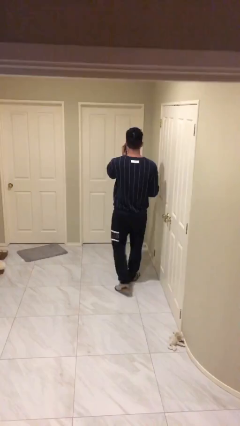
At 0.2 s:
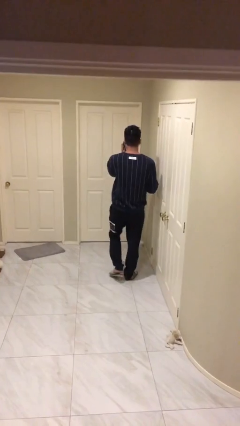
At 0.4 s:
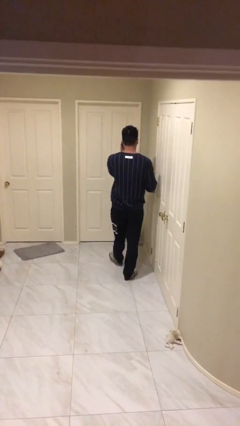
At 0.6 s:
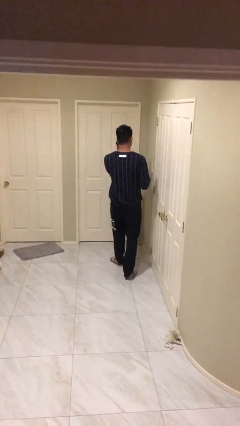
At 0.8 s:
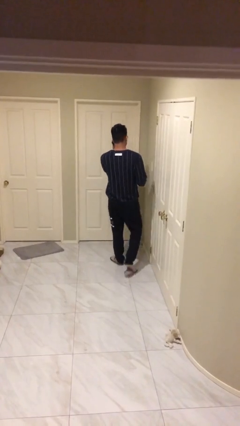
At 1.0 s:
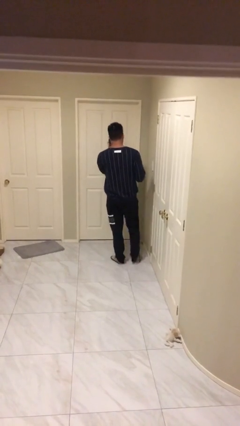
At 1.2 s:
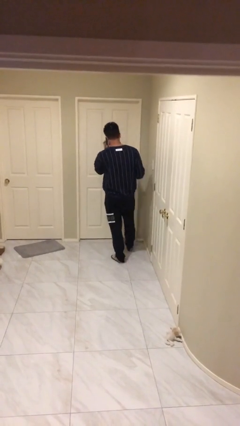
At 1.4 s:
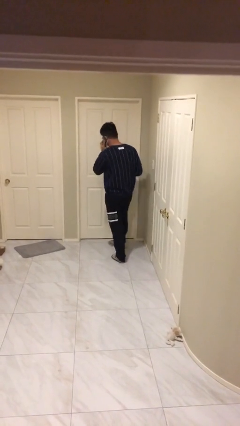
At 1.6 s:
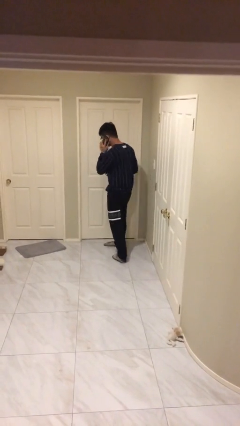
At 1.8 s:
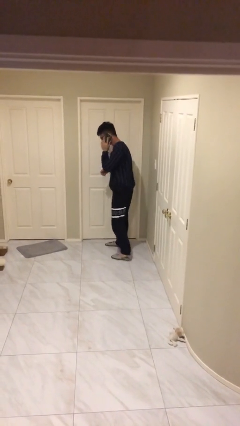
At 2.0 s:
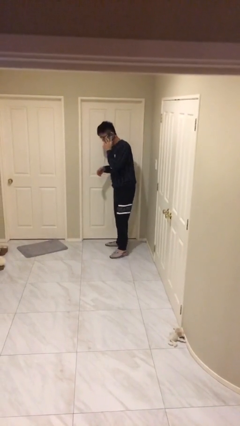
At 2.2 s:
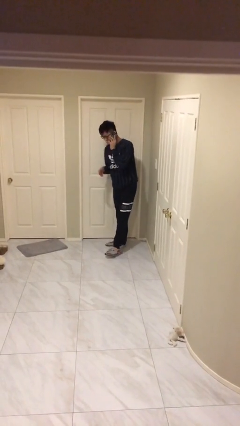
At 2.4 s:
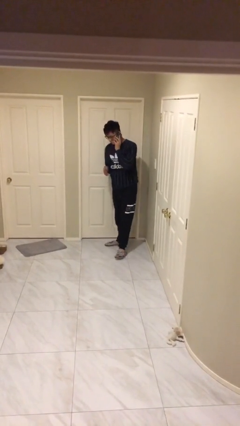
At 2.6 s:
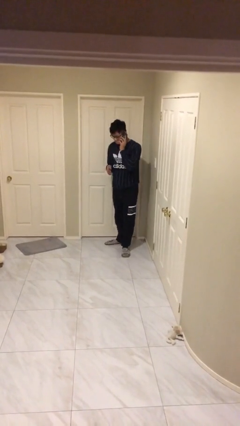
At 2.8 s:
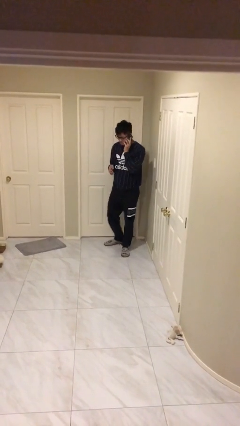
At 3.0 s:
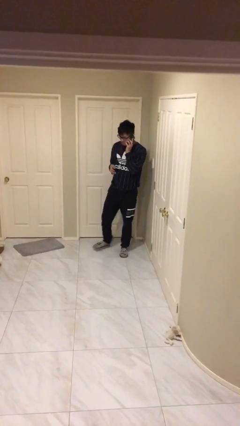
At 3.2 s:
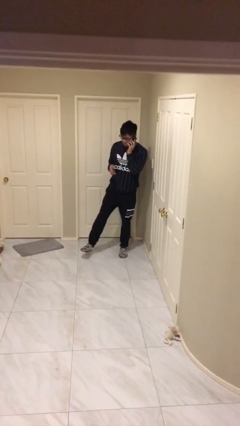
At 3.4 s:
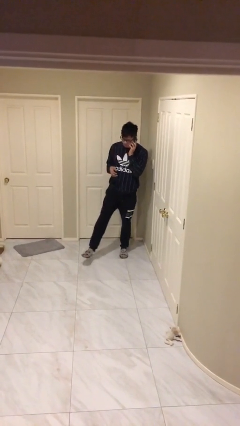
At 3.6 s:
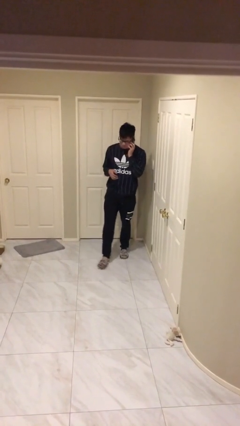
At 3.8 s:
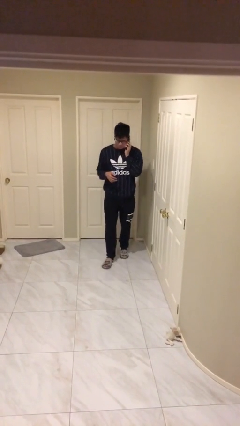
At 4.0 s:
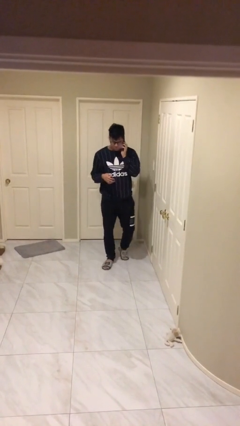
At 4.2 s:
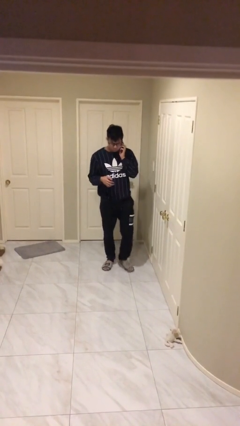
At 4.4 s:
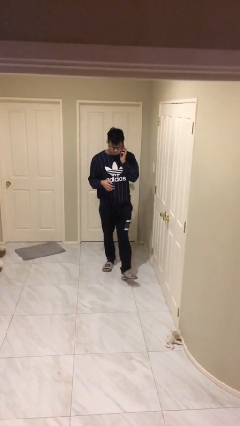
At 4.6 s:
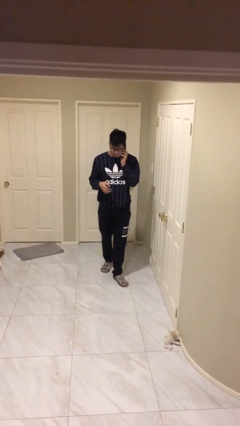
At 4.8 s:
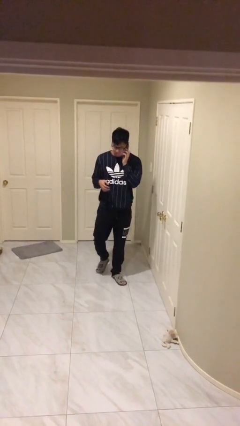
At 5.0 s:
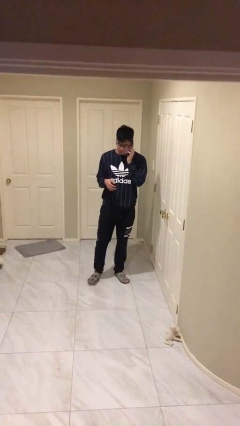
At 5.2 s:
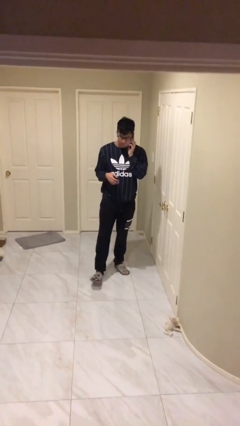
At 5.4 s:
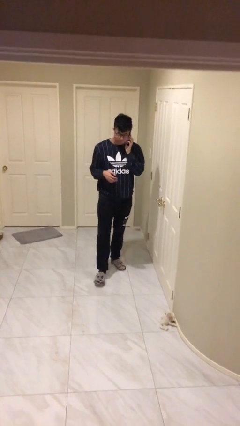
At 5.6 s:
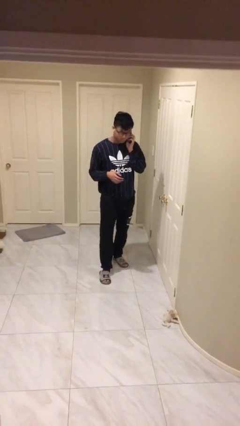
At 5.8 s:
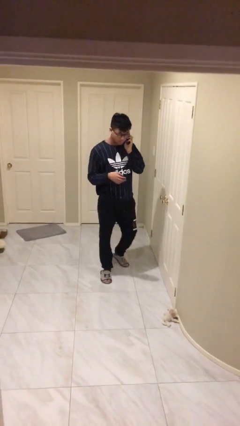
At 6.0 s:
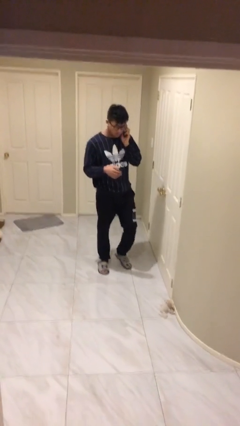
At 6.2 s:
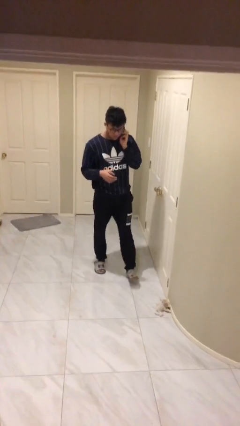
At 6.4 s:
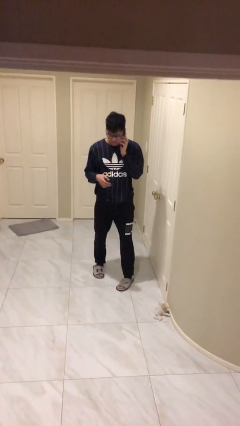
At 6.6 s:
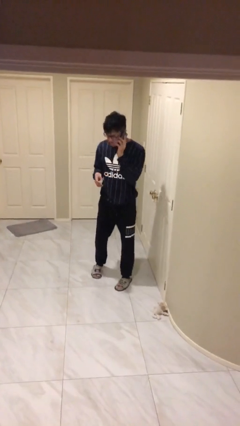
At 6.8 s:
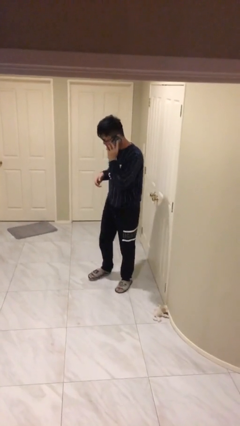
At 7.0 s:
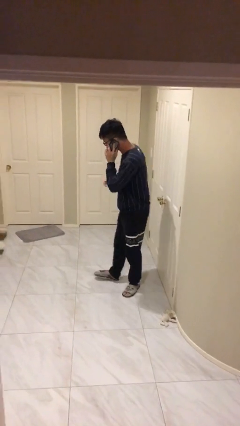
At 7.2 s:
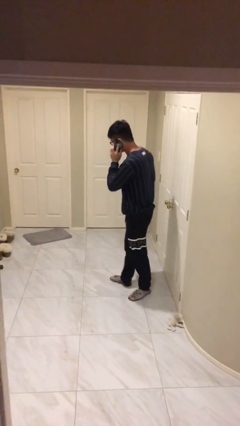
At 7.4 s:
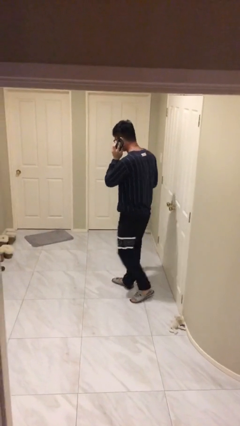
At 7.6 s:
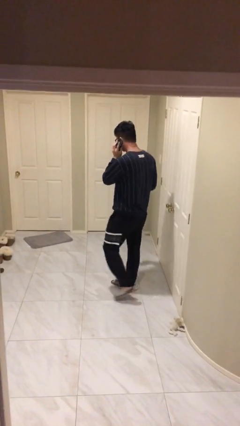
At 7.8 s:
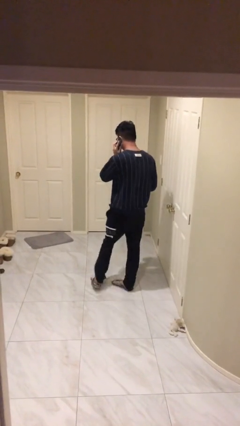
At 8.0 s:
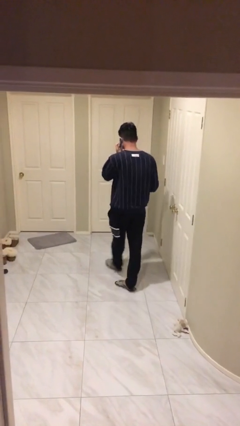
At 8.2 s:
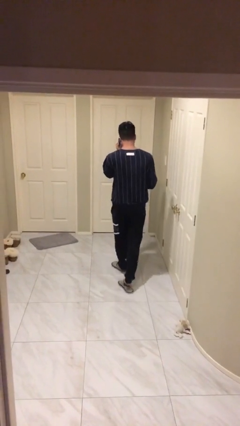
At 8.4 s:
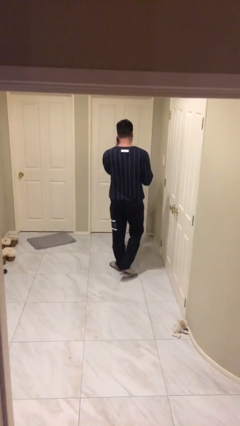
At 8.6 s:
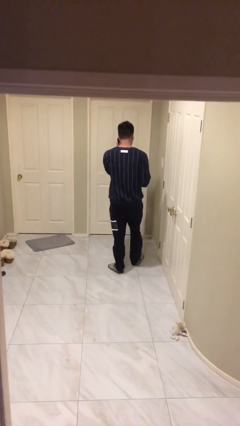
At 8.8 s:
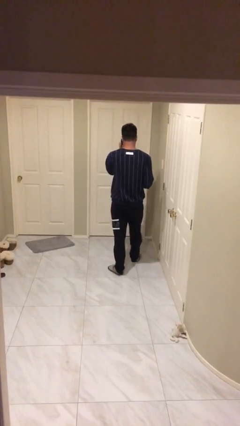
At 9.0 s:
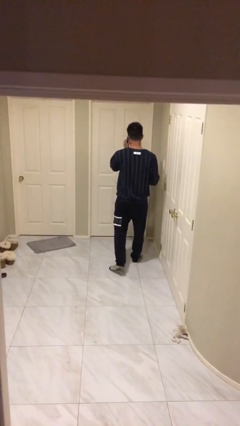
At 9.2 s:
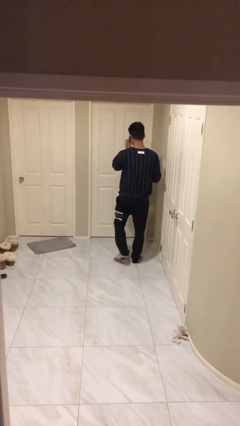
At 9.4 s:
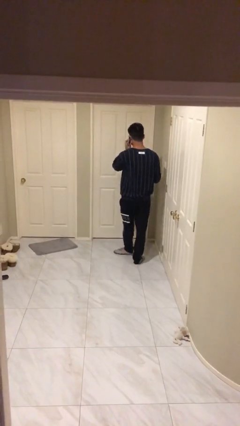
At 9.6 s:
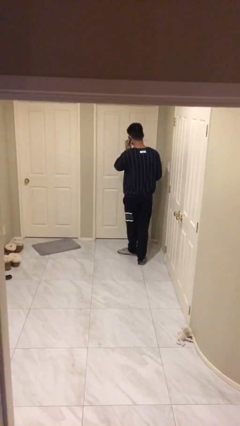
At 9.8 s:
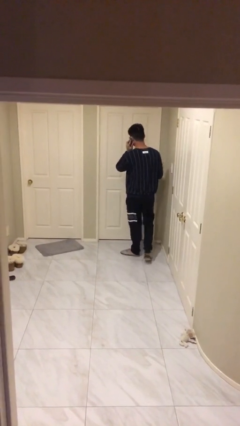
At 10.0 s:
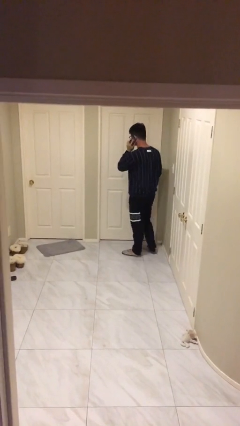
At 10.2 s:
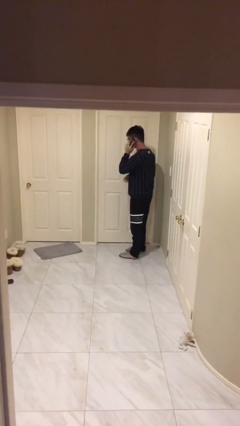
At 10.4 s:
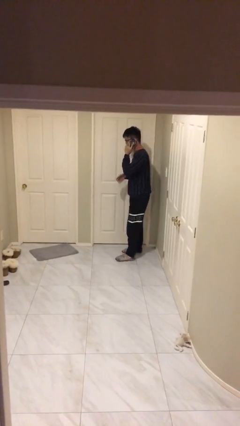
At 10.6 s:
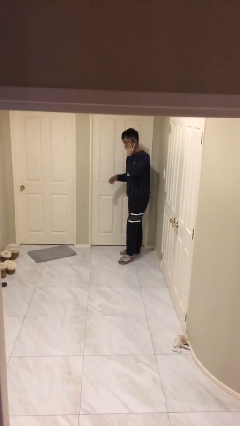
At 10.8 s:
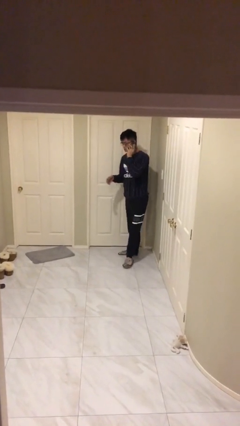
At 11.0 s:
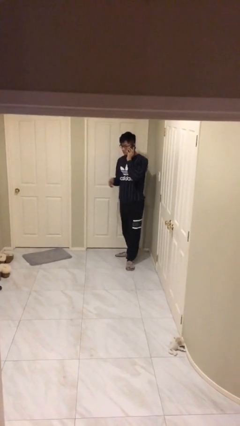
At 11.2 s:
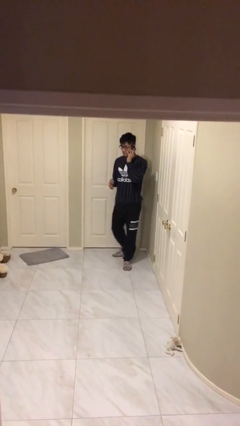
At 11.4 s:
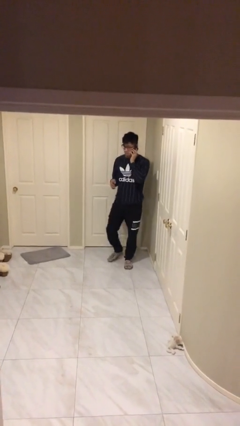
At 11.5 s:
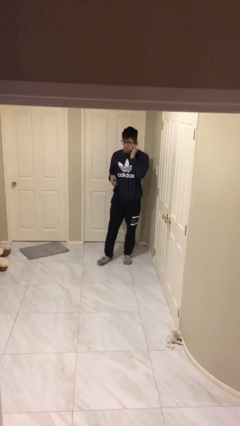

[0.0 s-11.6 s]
person talks on phone

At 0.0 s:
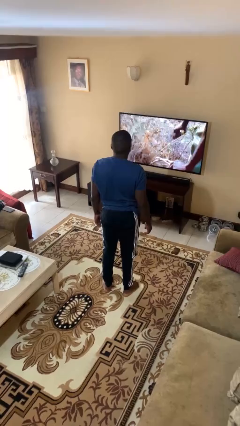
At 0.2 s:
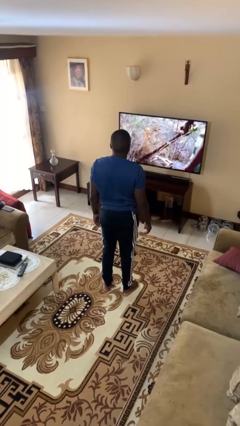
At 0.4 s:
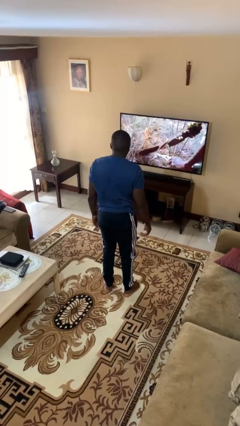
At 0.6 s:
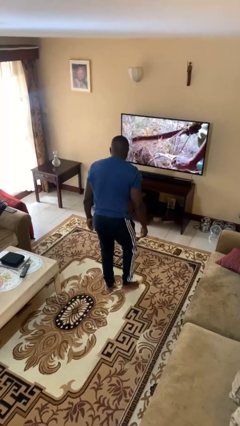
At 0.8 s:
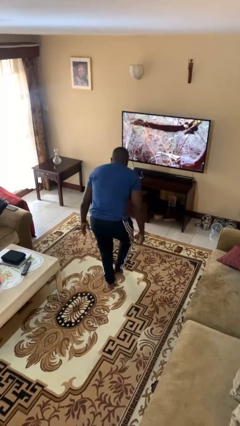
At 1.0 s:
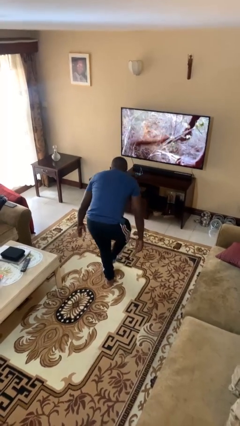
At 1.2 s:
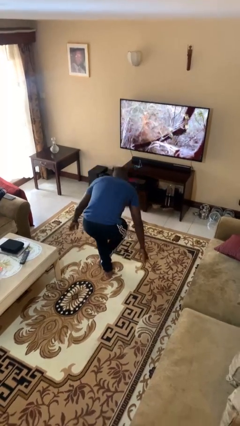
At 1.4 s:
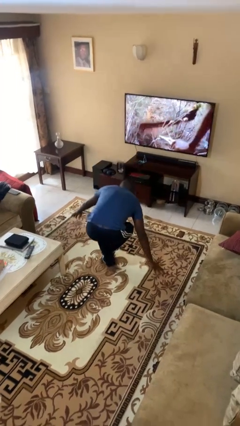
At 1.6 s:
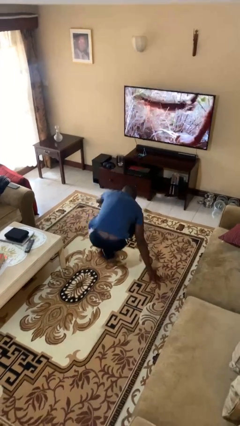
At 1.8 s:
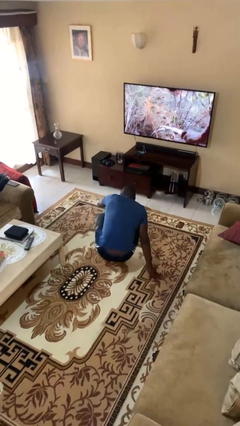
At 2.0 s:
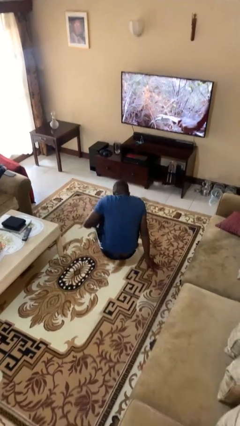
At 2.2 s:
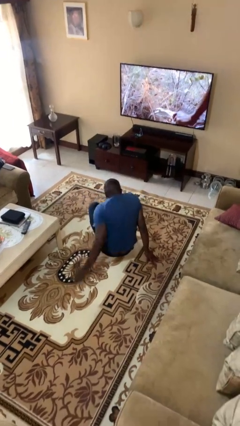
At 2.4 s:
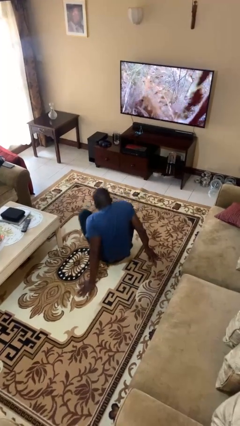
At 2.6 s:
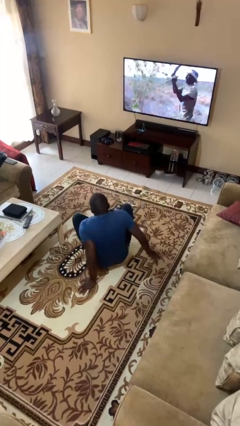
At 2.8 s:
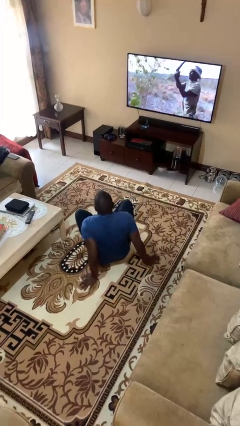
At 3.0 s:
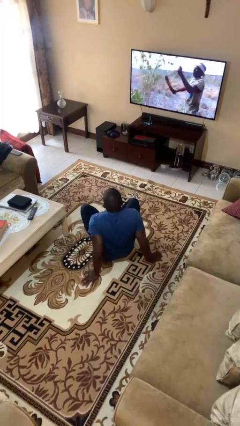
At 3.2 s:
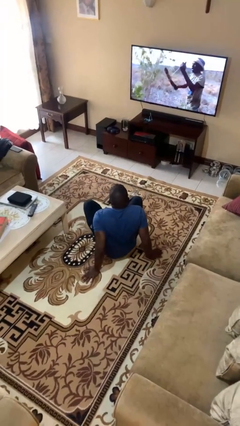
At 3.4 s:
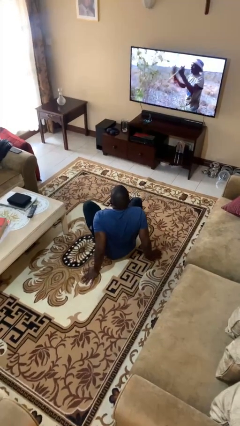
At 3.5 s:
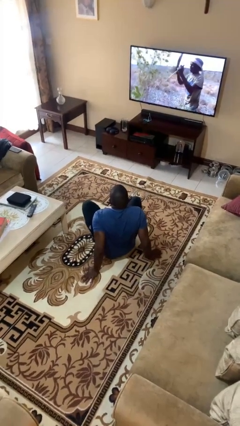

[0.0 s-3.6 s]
person sits crisscross

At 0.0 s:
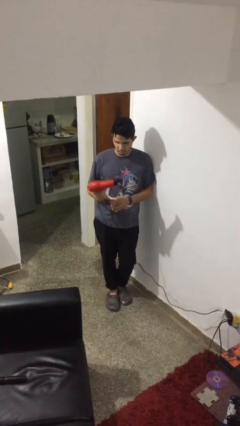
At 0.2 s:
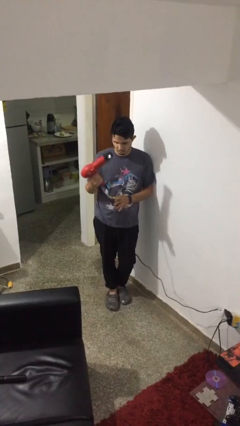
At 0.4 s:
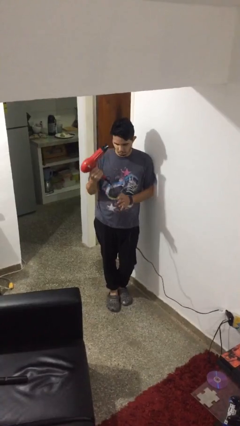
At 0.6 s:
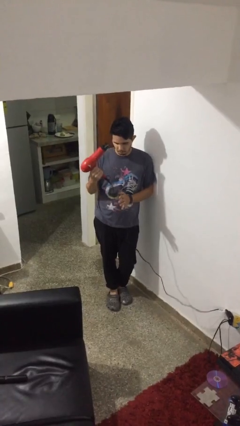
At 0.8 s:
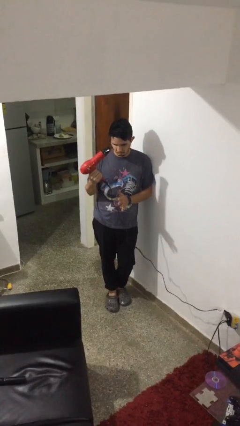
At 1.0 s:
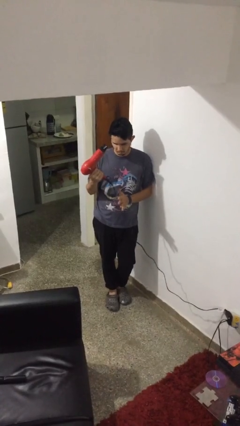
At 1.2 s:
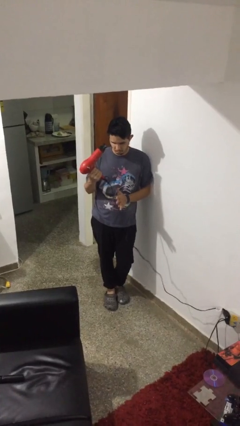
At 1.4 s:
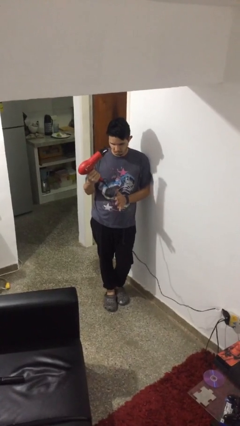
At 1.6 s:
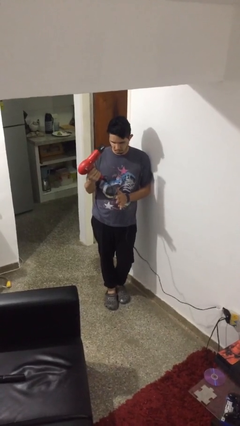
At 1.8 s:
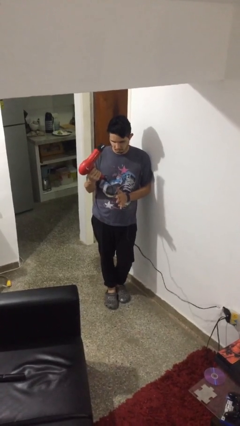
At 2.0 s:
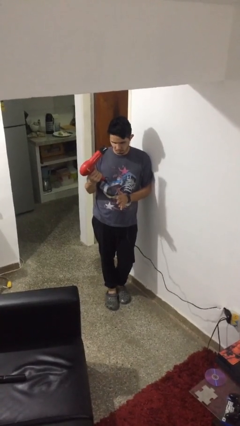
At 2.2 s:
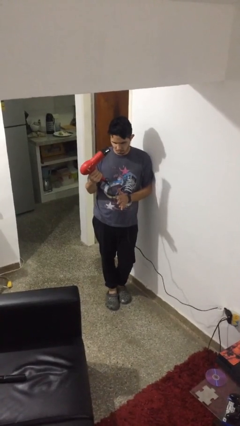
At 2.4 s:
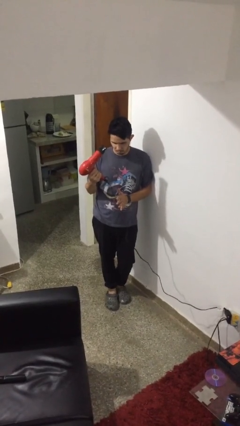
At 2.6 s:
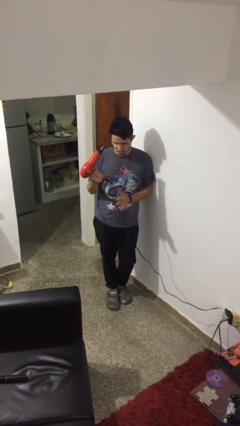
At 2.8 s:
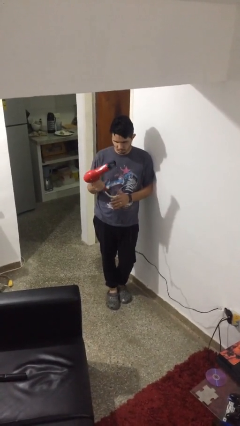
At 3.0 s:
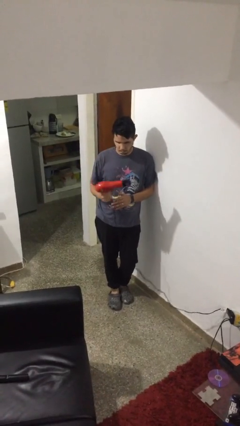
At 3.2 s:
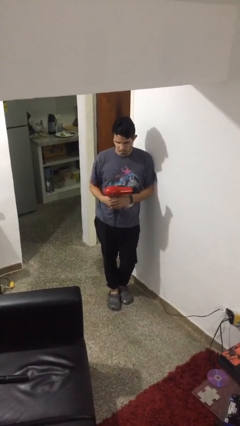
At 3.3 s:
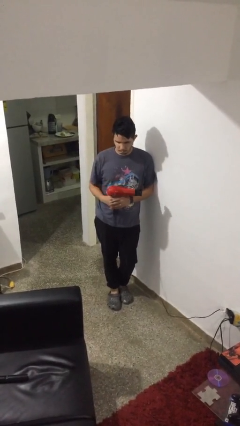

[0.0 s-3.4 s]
person dries hair with hairdryer
